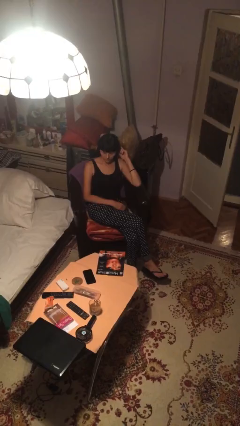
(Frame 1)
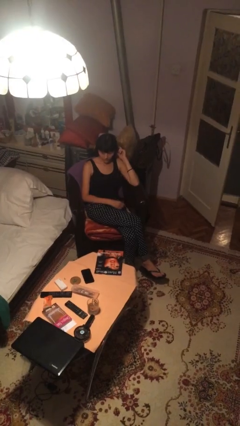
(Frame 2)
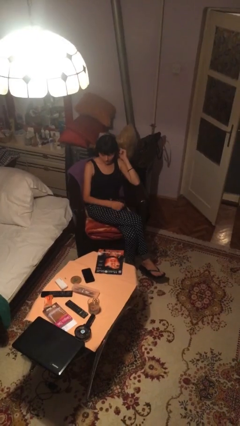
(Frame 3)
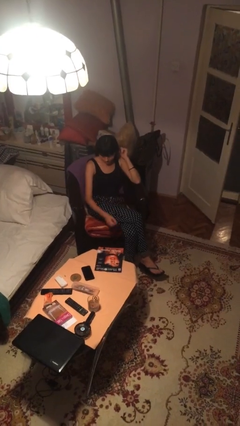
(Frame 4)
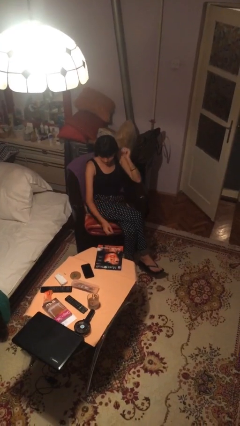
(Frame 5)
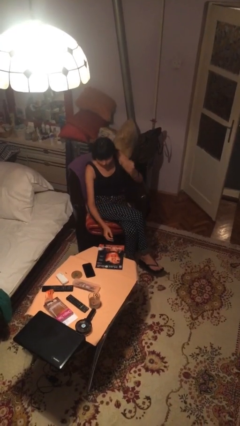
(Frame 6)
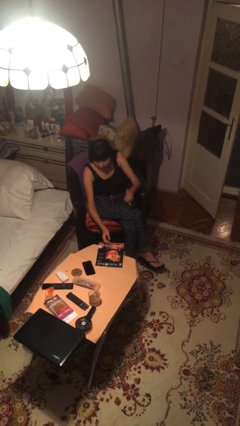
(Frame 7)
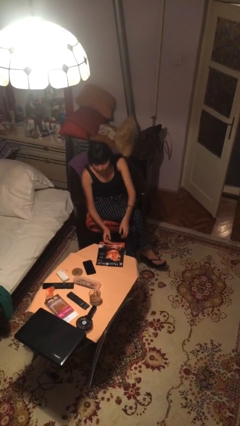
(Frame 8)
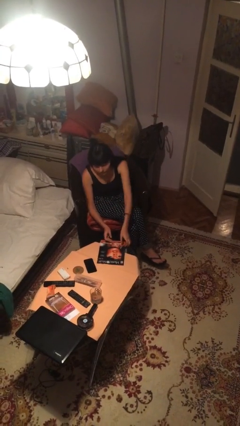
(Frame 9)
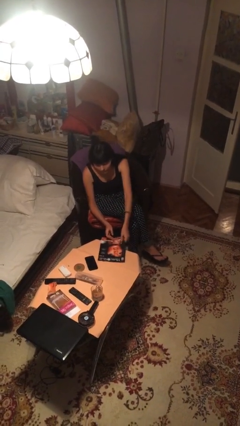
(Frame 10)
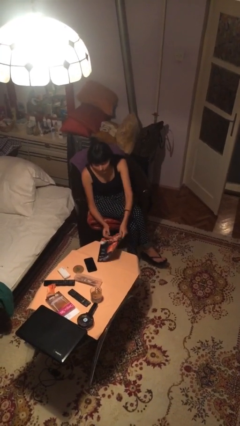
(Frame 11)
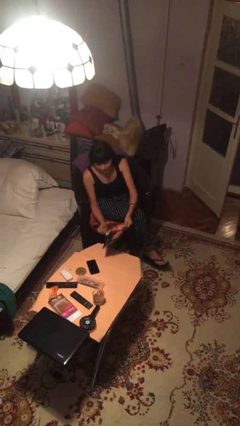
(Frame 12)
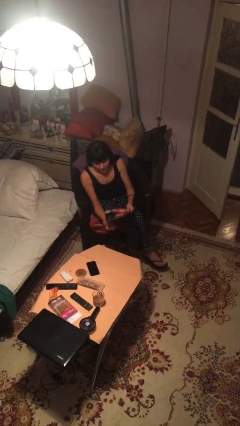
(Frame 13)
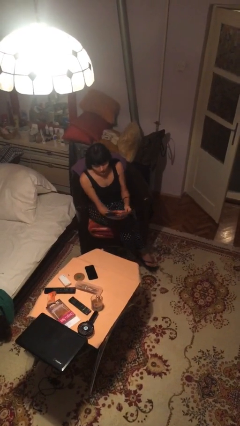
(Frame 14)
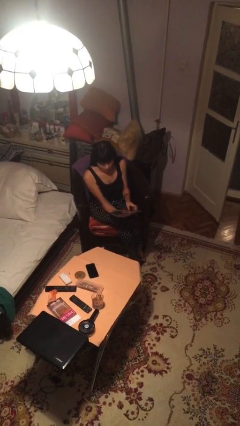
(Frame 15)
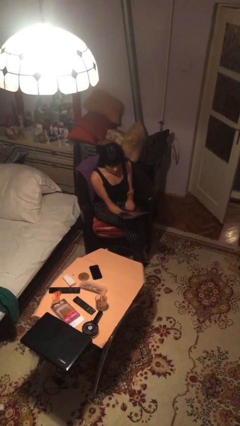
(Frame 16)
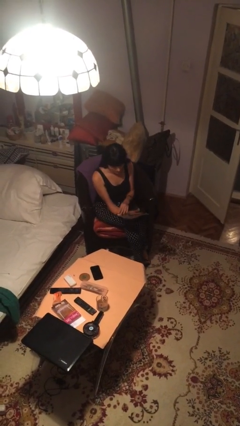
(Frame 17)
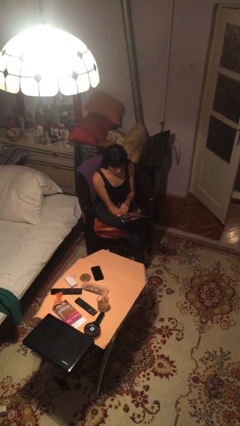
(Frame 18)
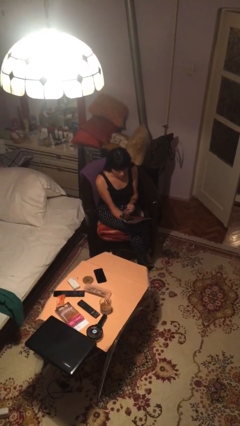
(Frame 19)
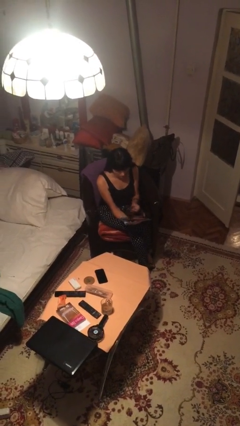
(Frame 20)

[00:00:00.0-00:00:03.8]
person picks up object from table

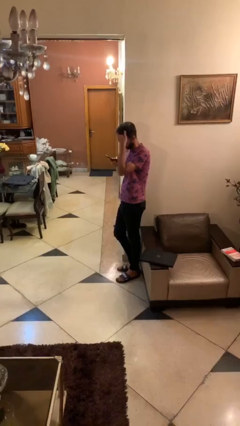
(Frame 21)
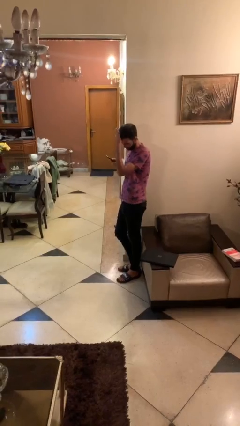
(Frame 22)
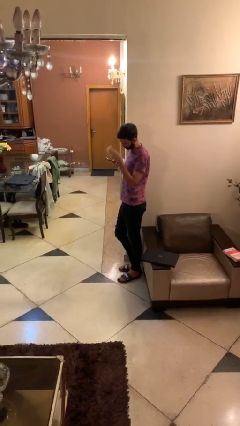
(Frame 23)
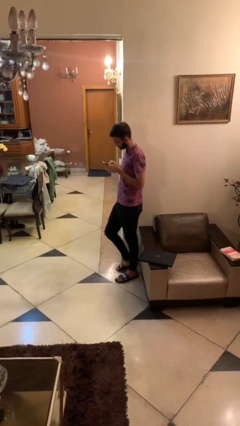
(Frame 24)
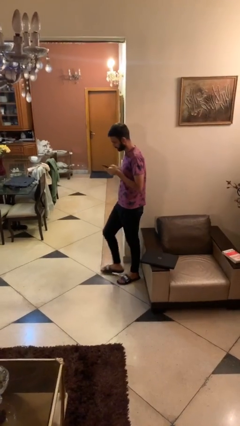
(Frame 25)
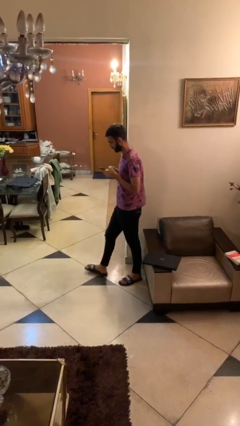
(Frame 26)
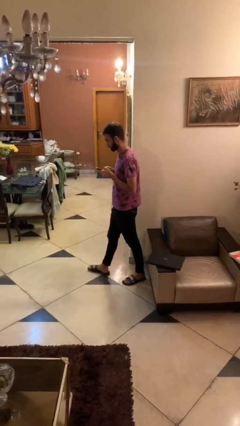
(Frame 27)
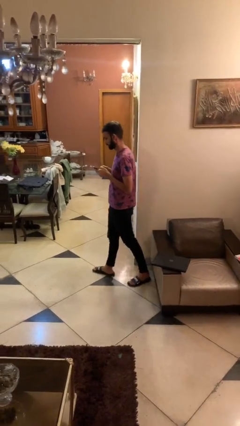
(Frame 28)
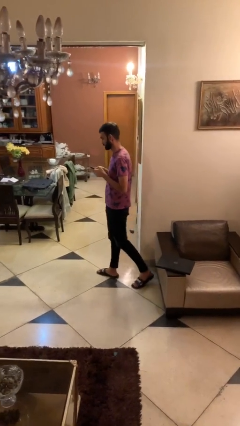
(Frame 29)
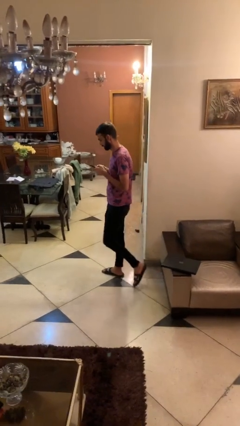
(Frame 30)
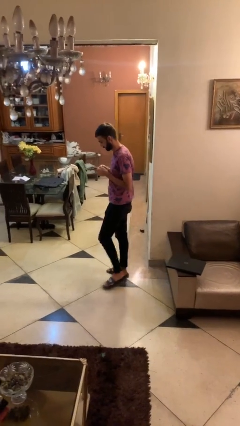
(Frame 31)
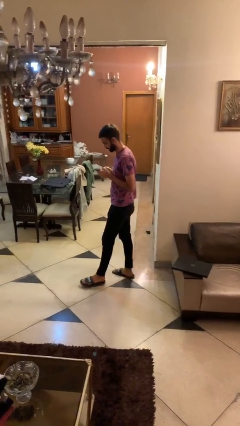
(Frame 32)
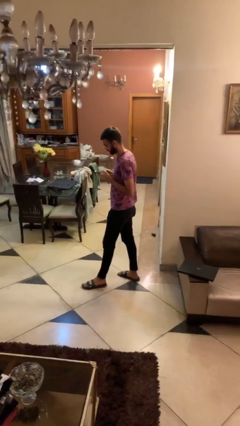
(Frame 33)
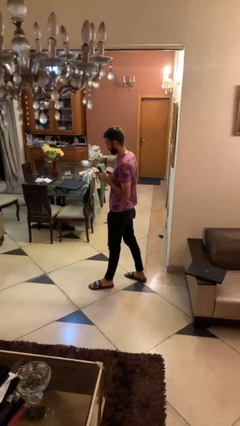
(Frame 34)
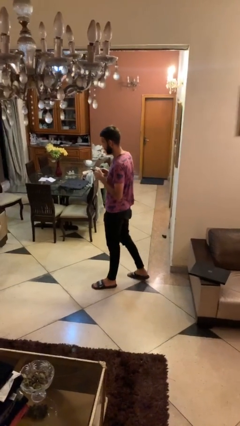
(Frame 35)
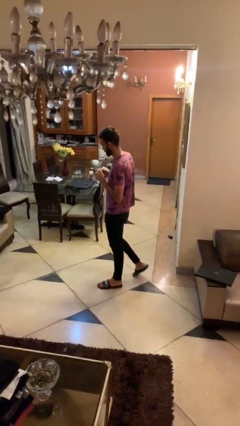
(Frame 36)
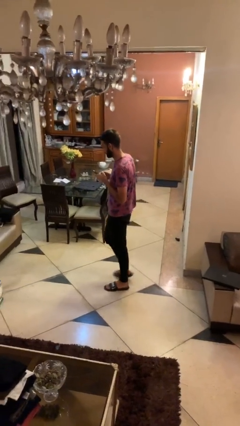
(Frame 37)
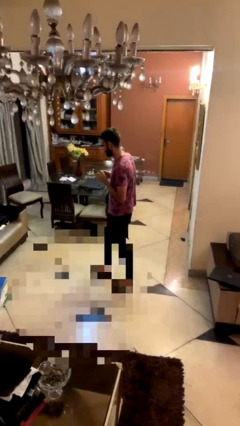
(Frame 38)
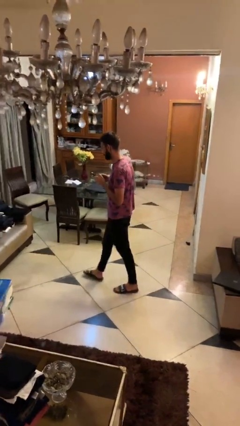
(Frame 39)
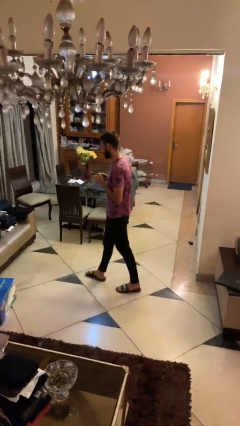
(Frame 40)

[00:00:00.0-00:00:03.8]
person texts on phone

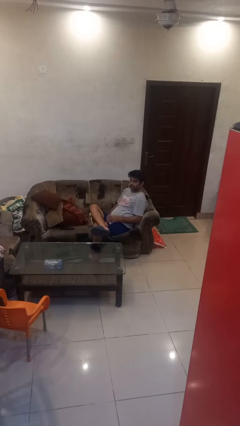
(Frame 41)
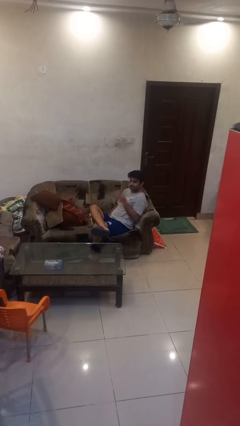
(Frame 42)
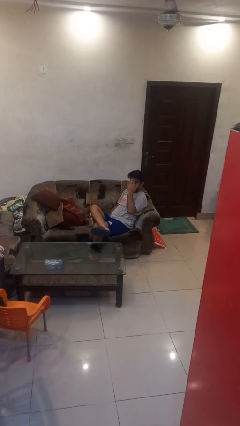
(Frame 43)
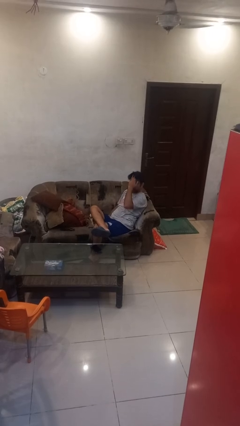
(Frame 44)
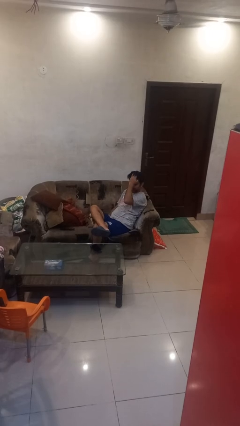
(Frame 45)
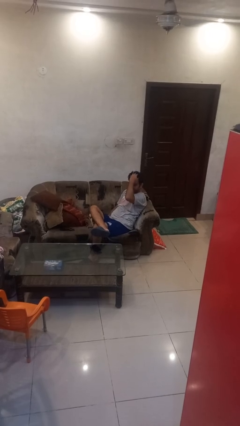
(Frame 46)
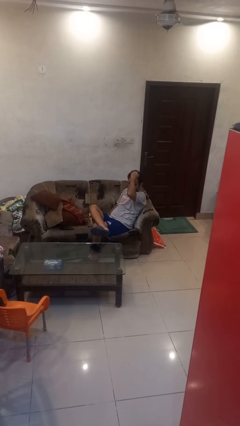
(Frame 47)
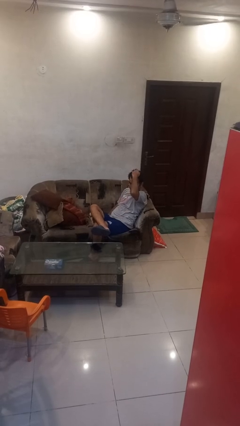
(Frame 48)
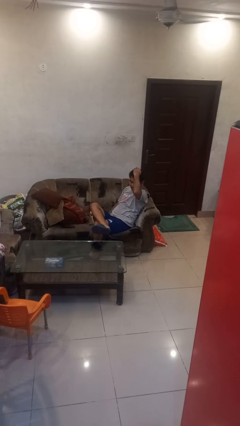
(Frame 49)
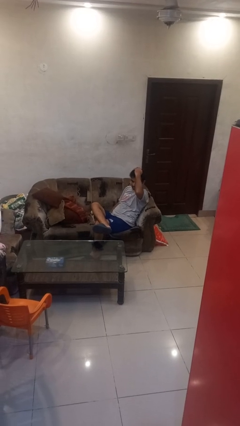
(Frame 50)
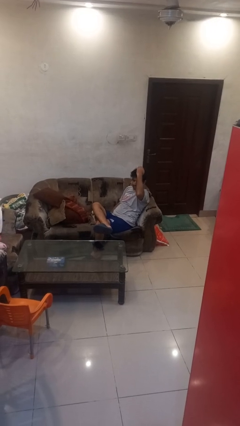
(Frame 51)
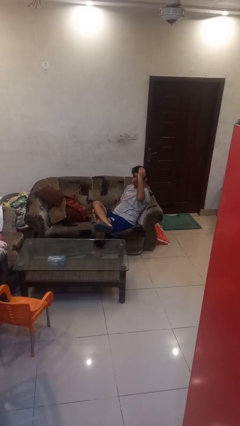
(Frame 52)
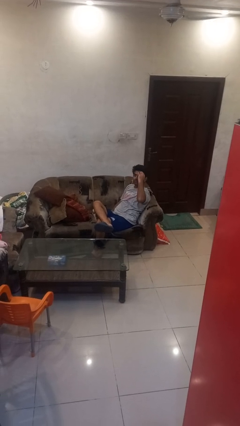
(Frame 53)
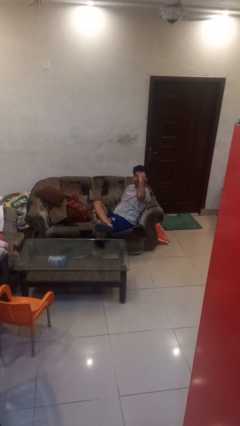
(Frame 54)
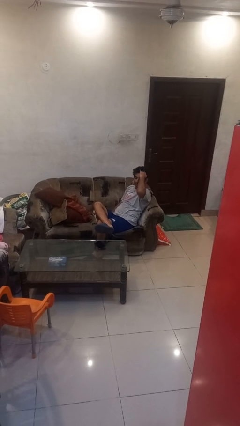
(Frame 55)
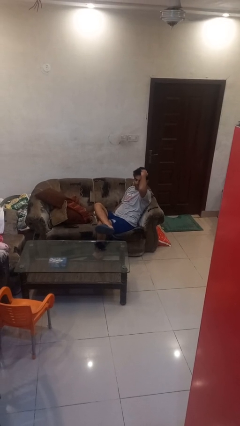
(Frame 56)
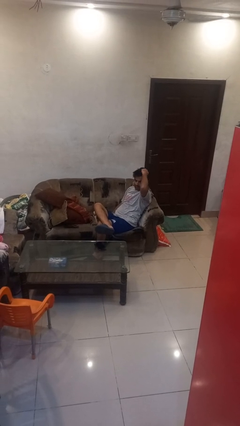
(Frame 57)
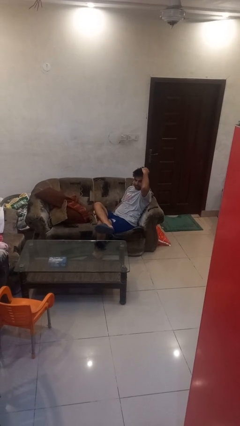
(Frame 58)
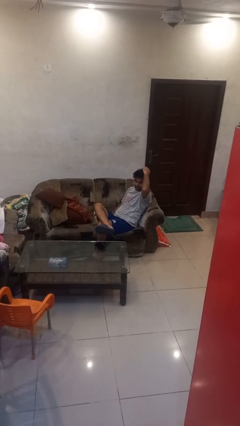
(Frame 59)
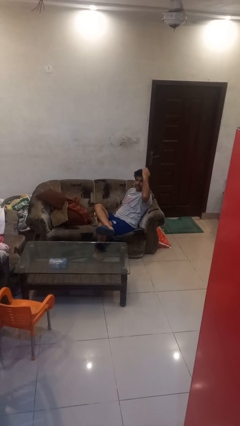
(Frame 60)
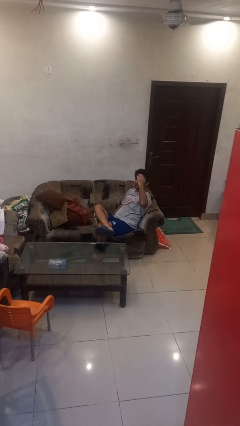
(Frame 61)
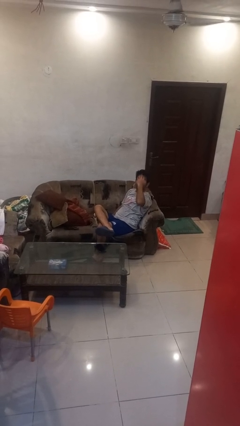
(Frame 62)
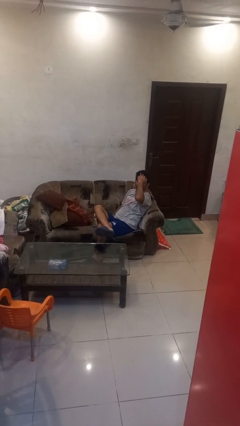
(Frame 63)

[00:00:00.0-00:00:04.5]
person strokes hair

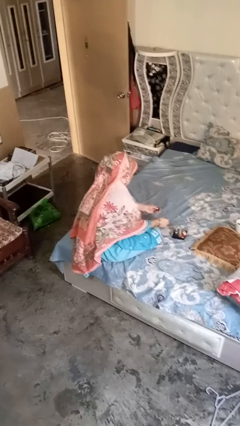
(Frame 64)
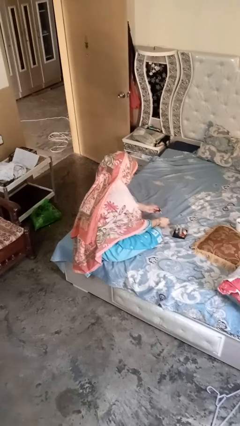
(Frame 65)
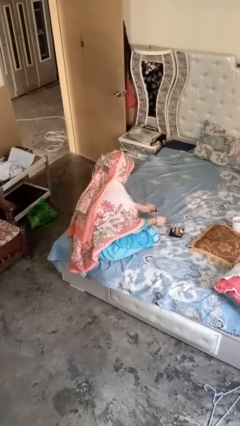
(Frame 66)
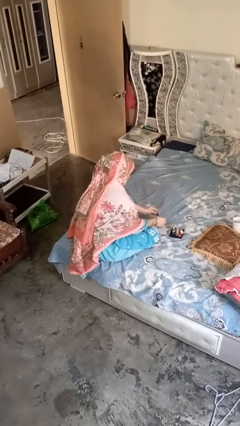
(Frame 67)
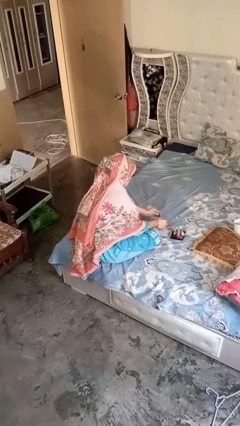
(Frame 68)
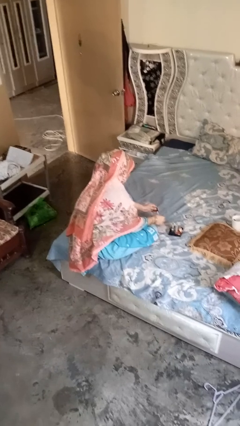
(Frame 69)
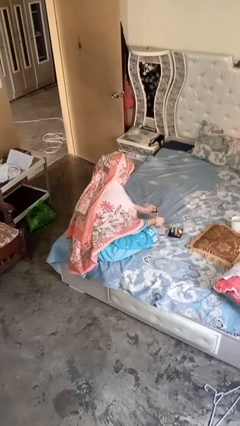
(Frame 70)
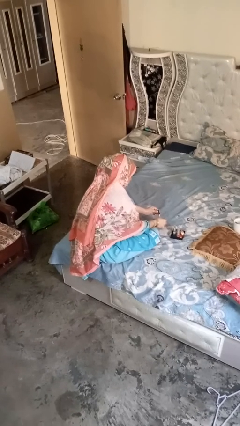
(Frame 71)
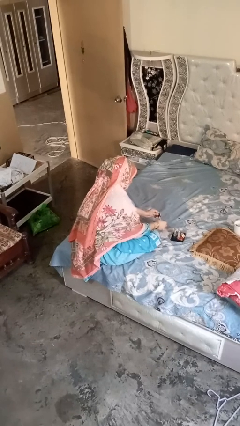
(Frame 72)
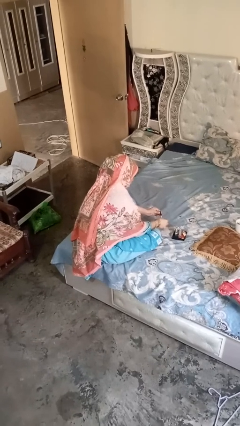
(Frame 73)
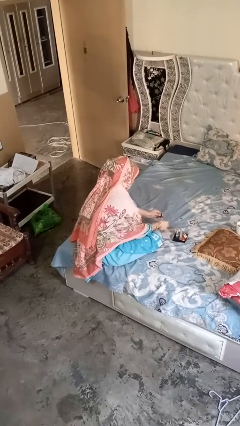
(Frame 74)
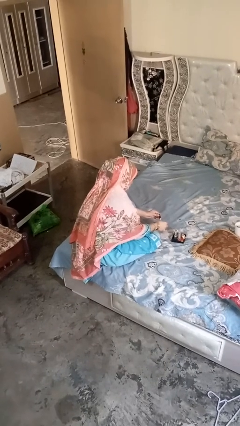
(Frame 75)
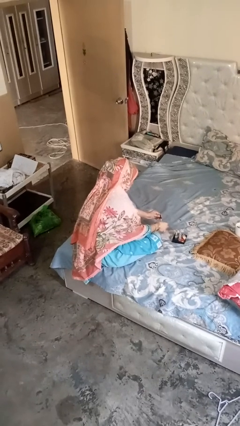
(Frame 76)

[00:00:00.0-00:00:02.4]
person paints fingernails

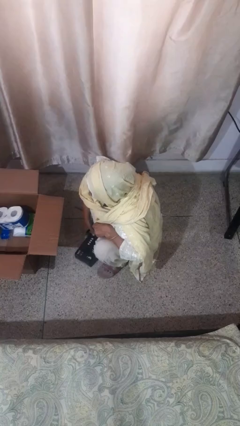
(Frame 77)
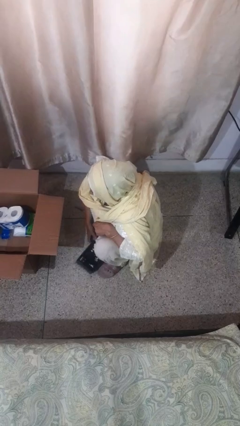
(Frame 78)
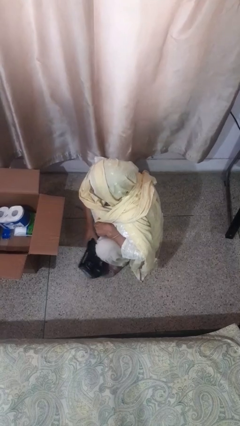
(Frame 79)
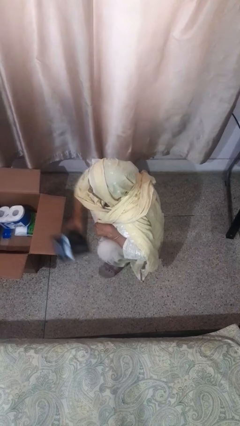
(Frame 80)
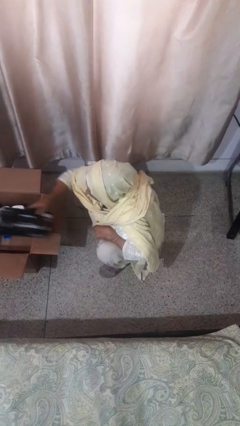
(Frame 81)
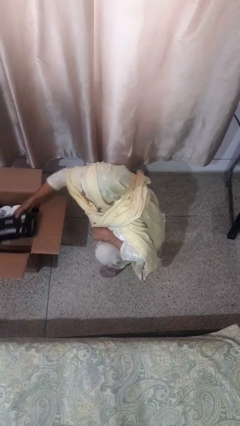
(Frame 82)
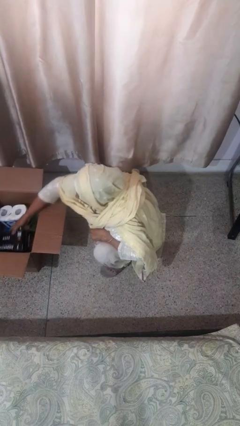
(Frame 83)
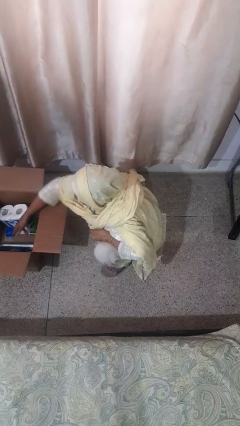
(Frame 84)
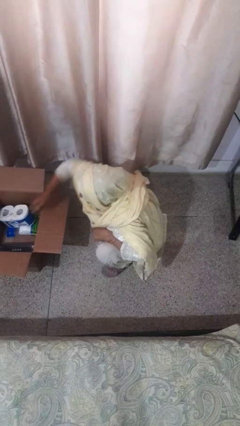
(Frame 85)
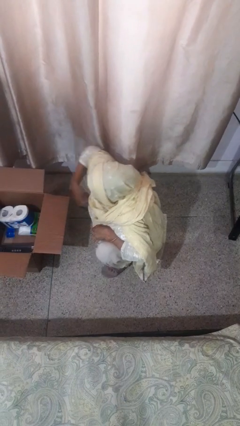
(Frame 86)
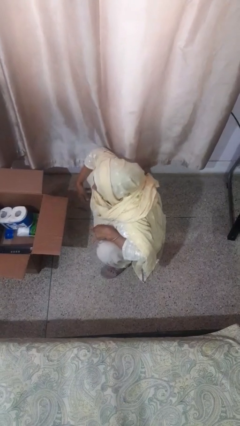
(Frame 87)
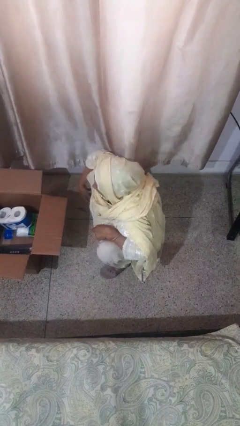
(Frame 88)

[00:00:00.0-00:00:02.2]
person puts object into box

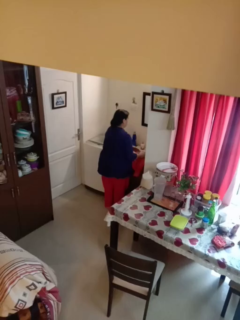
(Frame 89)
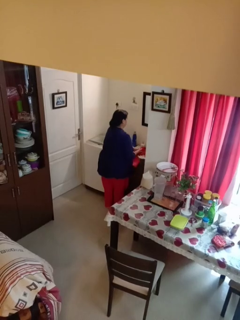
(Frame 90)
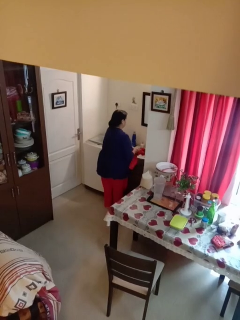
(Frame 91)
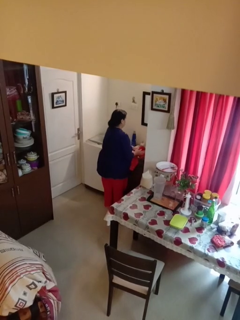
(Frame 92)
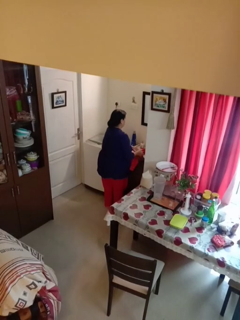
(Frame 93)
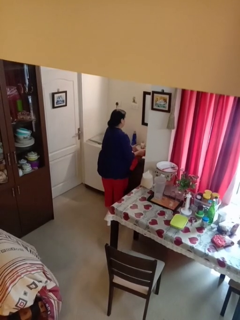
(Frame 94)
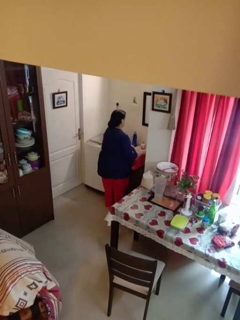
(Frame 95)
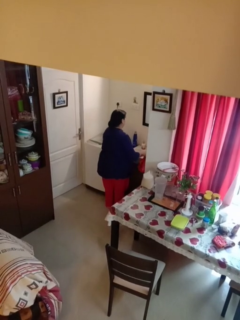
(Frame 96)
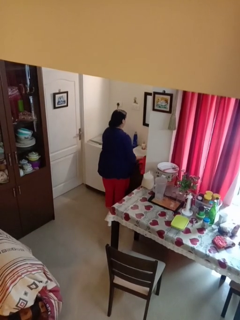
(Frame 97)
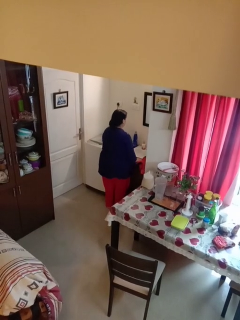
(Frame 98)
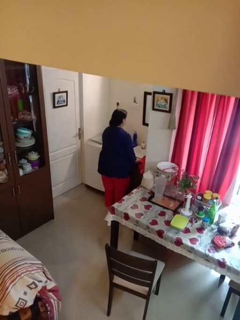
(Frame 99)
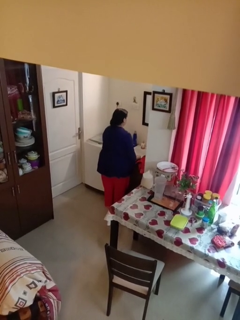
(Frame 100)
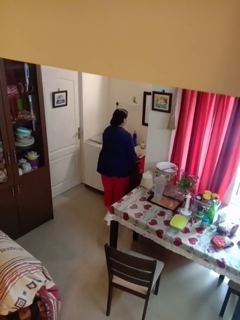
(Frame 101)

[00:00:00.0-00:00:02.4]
person dries hands with towel
